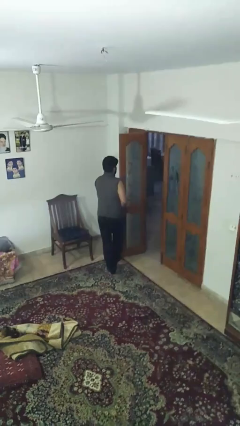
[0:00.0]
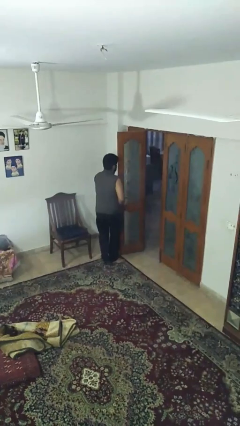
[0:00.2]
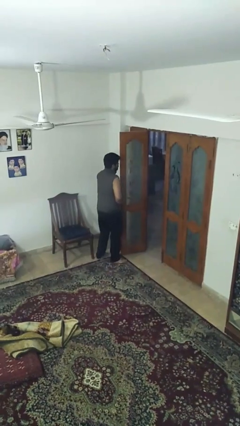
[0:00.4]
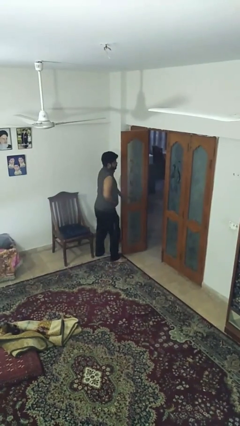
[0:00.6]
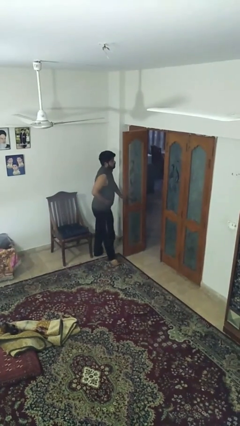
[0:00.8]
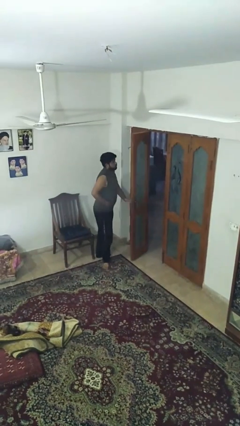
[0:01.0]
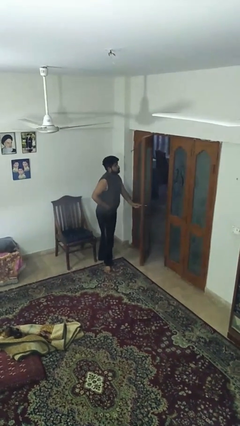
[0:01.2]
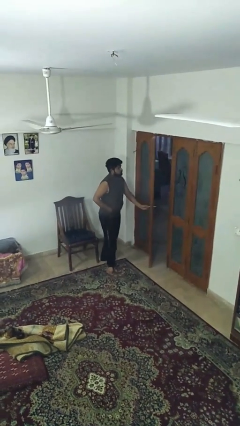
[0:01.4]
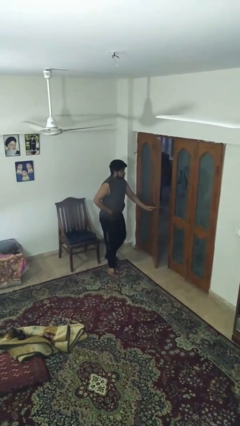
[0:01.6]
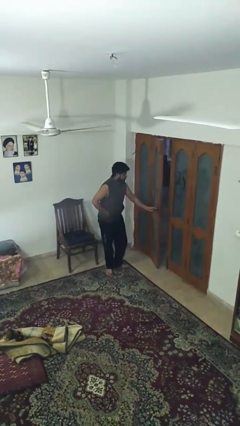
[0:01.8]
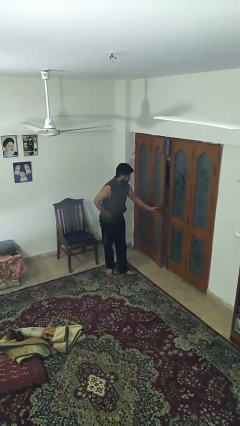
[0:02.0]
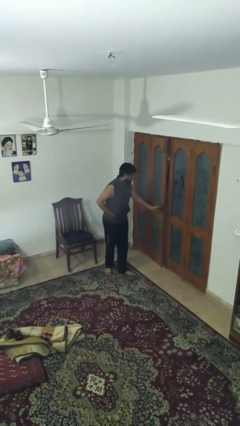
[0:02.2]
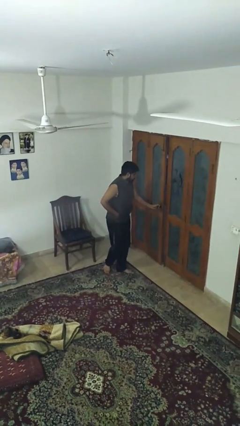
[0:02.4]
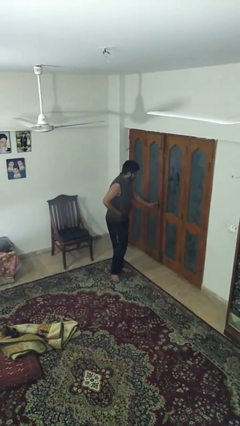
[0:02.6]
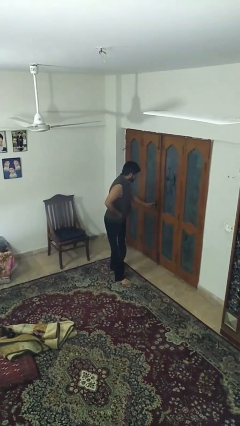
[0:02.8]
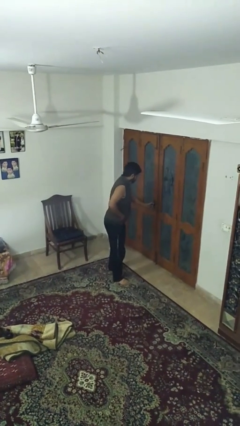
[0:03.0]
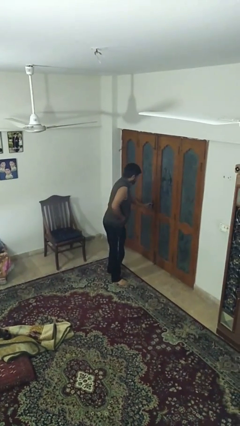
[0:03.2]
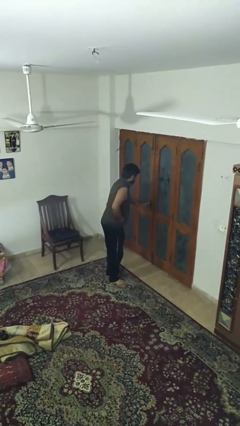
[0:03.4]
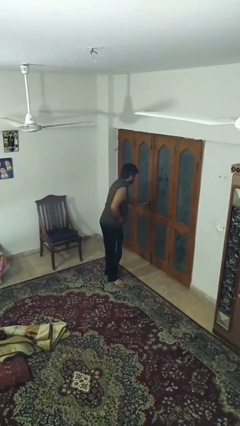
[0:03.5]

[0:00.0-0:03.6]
person closes facility door

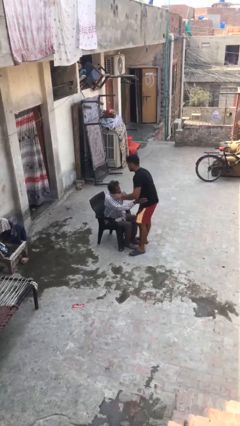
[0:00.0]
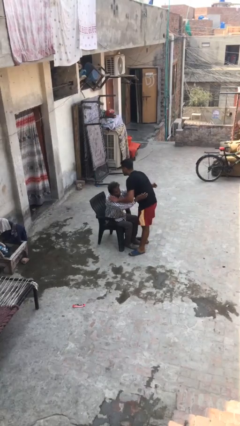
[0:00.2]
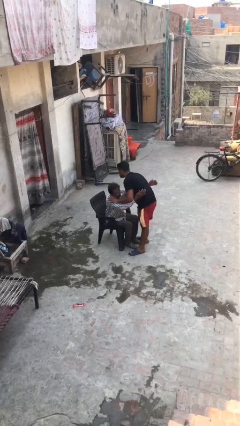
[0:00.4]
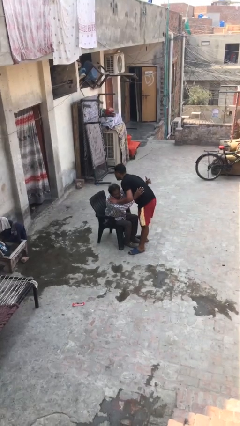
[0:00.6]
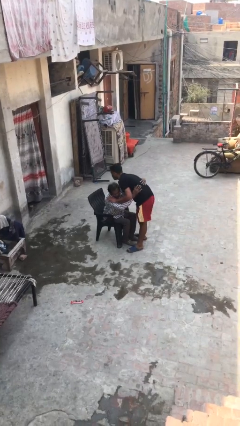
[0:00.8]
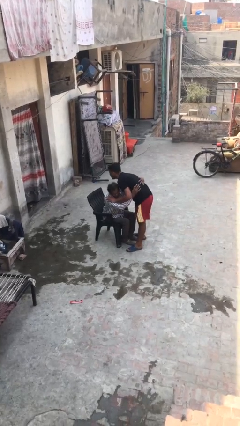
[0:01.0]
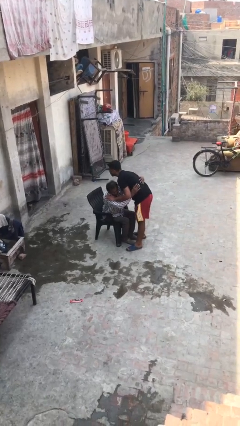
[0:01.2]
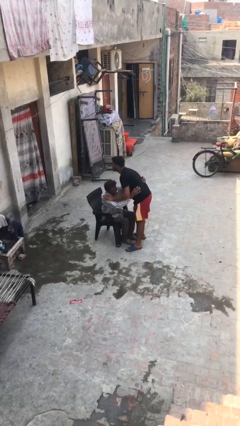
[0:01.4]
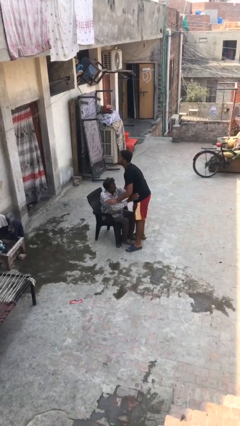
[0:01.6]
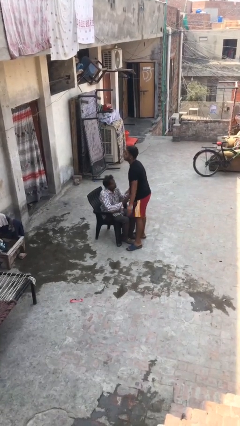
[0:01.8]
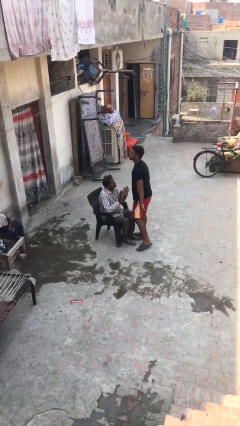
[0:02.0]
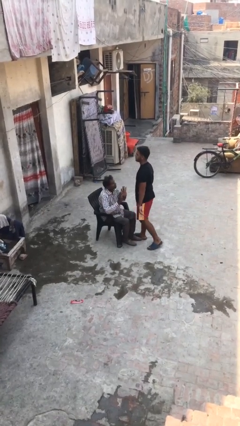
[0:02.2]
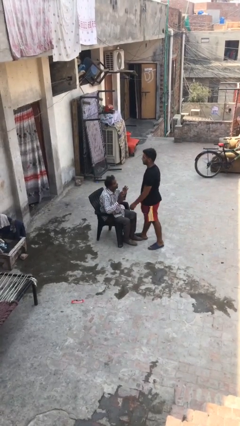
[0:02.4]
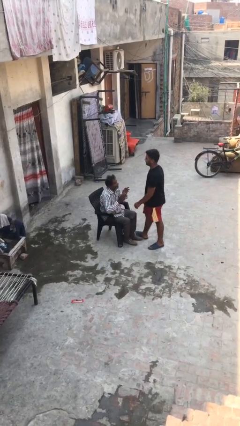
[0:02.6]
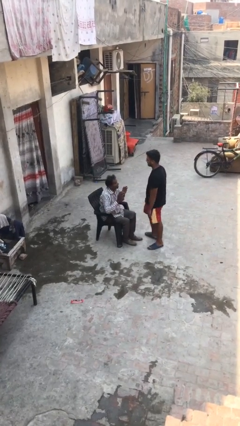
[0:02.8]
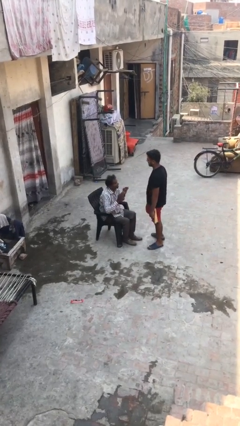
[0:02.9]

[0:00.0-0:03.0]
person embraces person

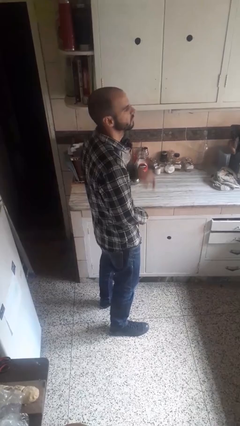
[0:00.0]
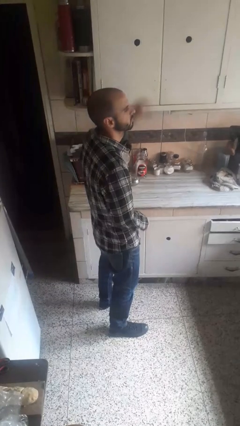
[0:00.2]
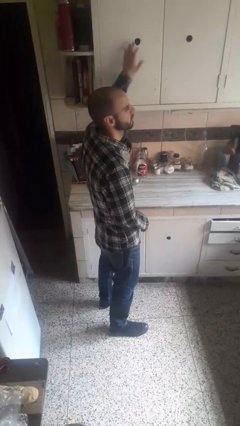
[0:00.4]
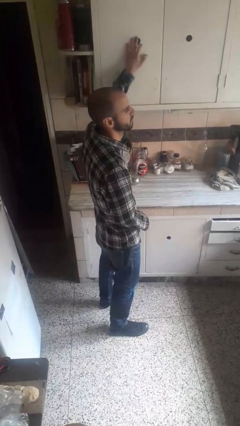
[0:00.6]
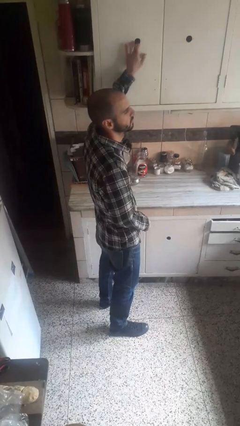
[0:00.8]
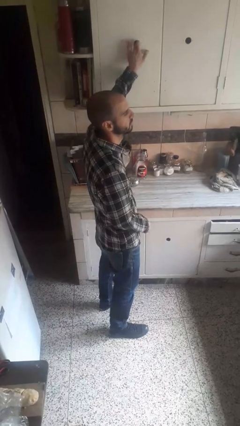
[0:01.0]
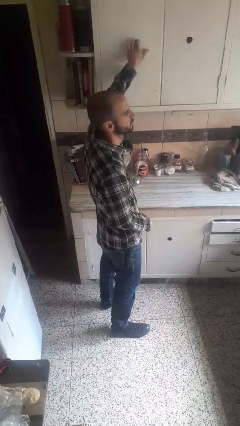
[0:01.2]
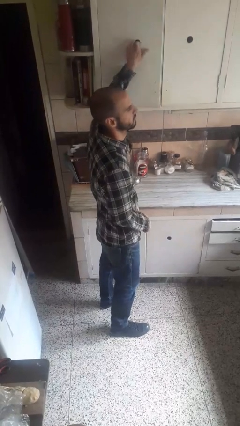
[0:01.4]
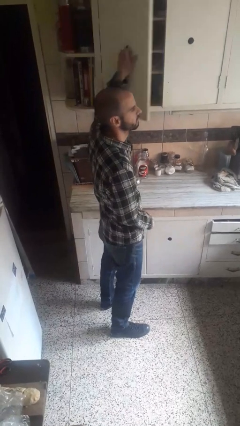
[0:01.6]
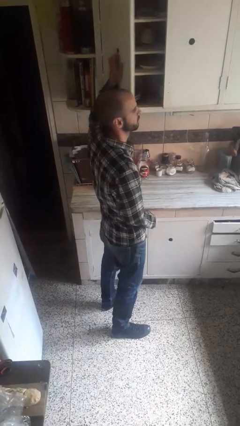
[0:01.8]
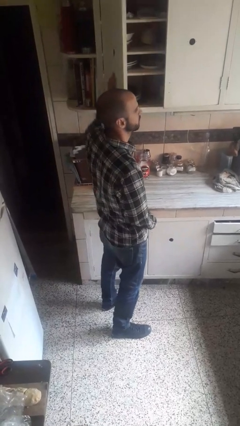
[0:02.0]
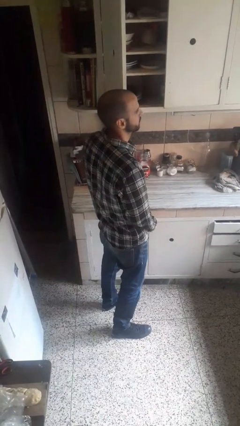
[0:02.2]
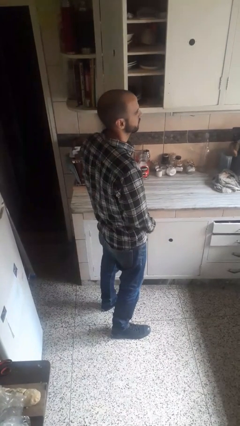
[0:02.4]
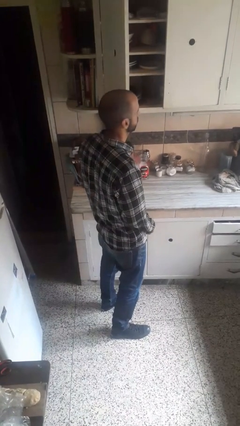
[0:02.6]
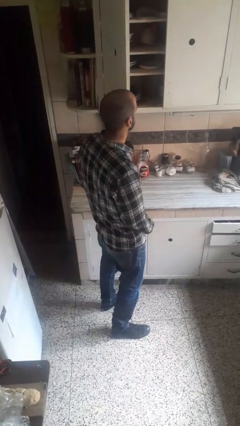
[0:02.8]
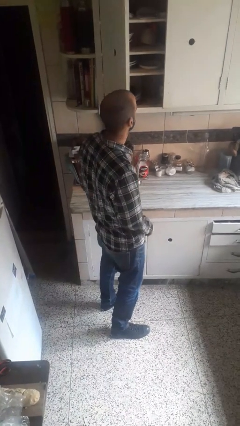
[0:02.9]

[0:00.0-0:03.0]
person opens closet door

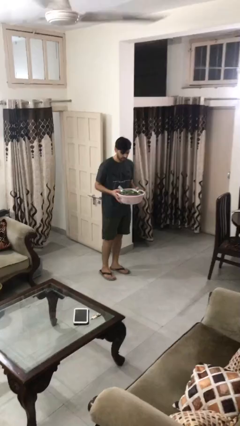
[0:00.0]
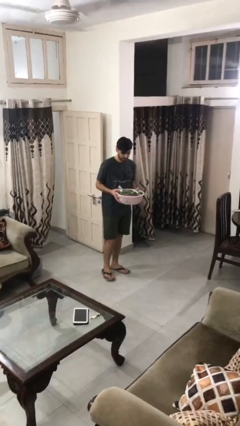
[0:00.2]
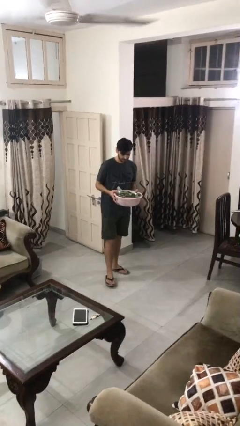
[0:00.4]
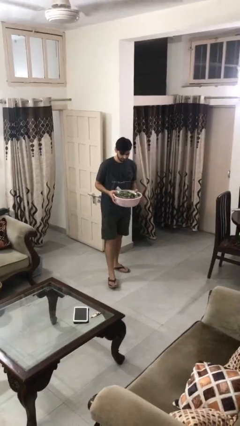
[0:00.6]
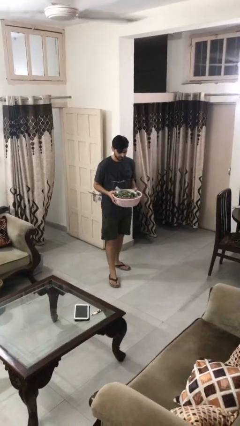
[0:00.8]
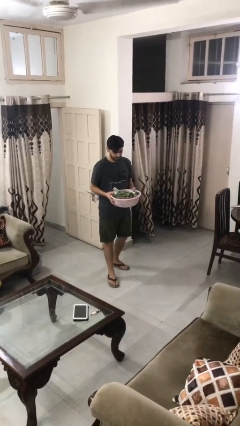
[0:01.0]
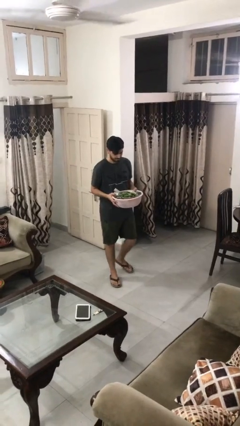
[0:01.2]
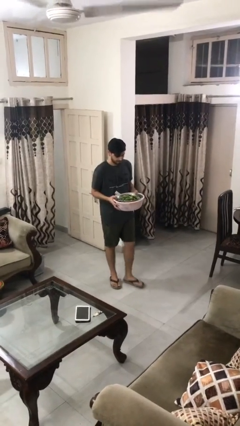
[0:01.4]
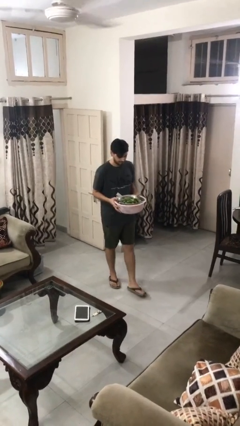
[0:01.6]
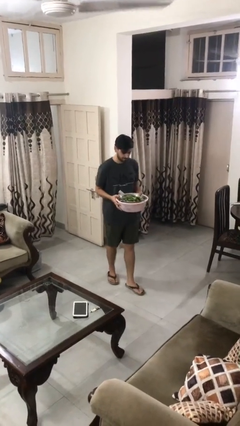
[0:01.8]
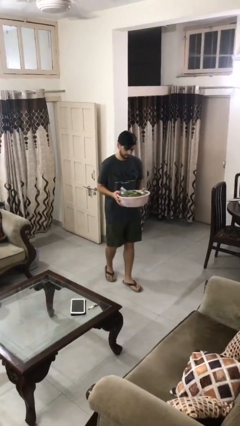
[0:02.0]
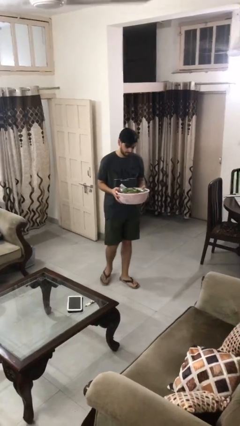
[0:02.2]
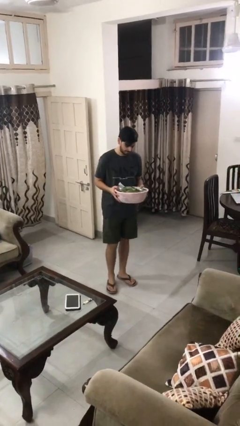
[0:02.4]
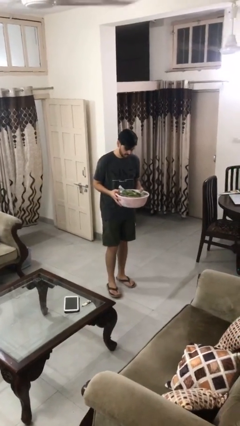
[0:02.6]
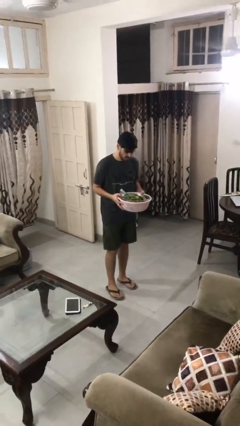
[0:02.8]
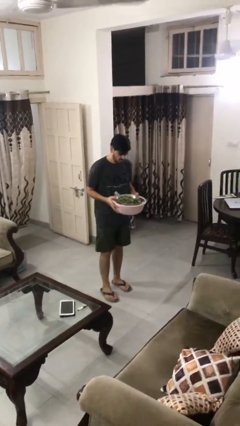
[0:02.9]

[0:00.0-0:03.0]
person carries groceries

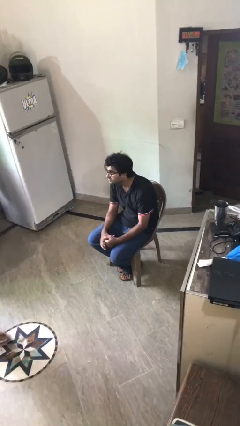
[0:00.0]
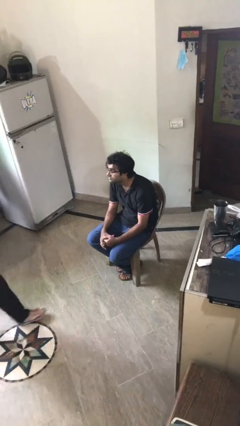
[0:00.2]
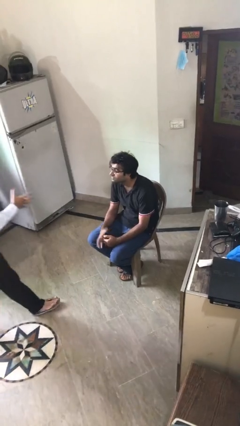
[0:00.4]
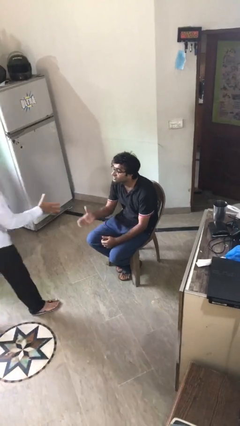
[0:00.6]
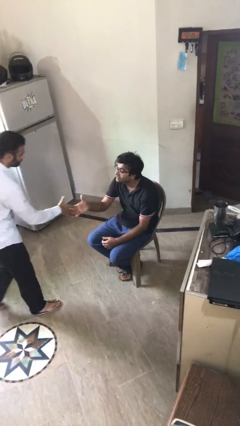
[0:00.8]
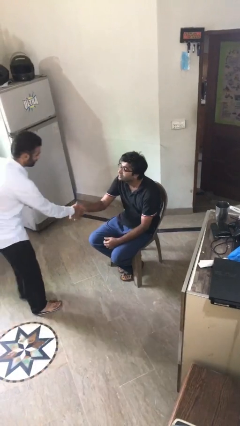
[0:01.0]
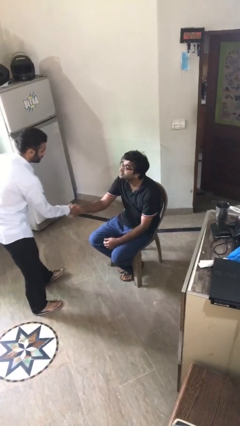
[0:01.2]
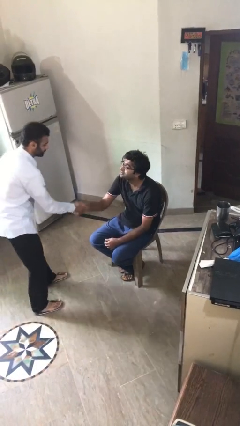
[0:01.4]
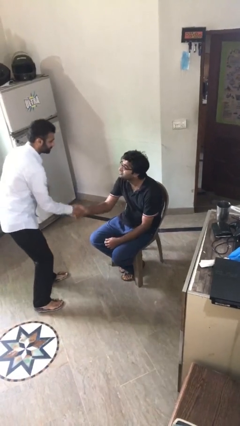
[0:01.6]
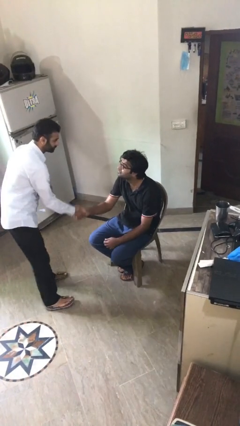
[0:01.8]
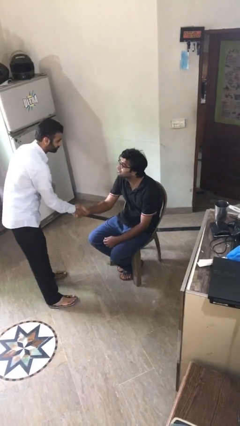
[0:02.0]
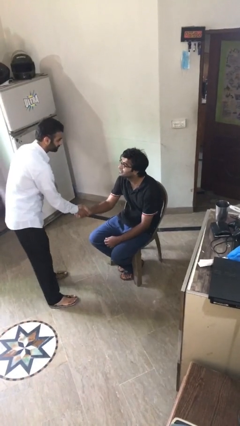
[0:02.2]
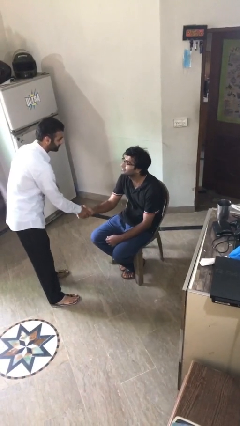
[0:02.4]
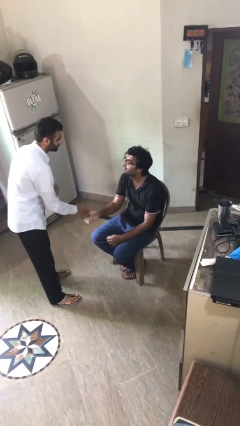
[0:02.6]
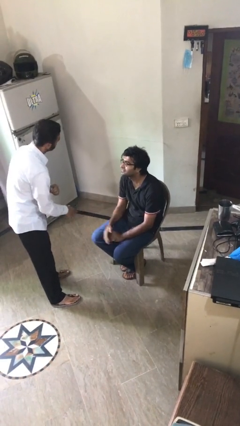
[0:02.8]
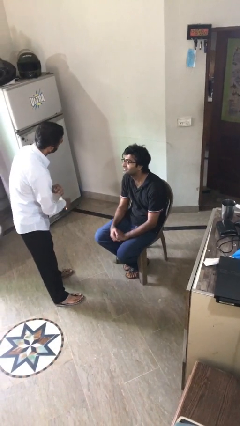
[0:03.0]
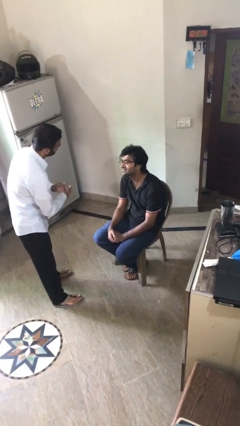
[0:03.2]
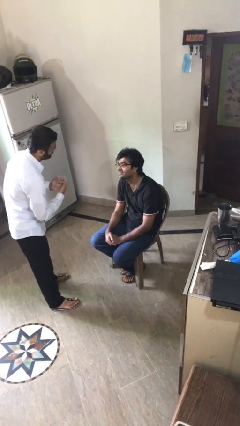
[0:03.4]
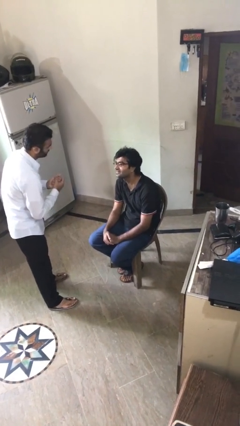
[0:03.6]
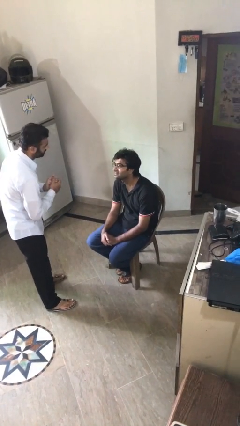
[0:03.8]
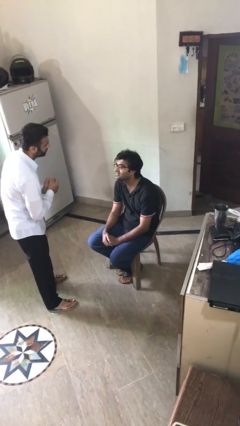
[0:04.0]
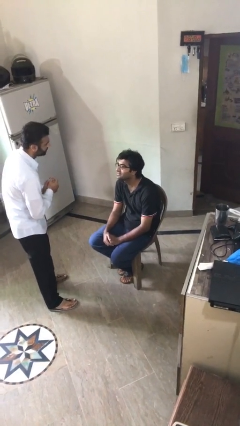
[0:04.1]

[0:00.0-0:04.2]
person shakes hand

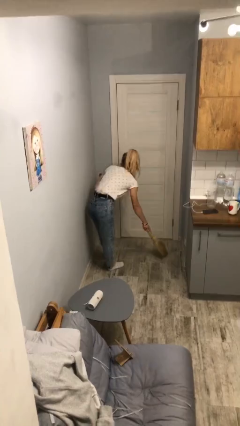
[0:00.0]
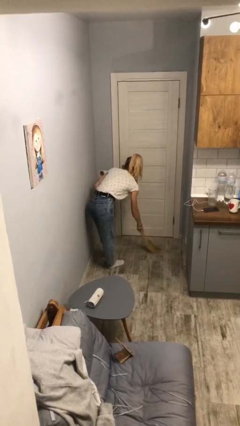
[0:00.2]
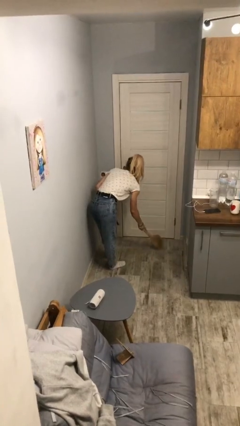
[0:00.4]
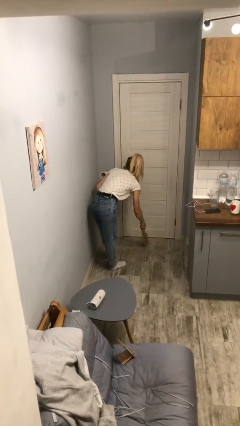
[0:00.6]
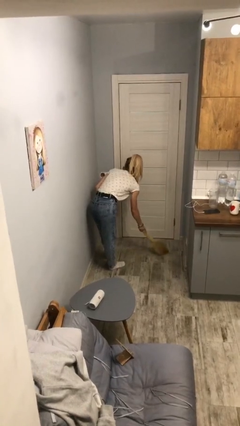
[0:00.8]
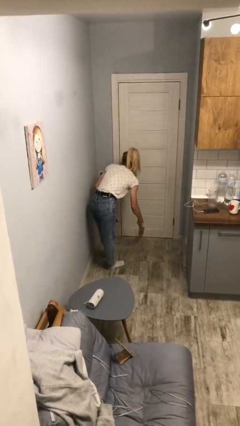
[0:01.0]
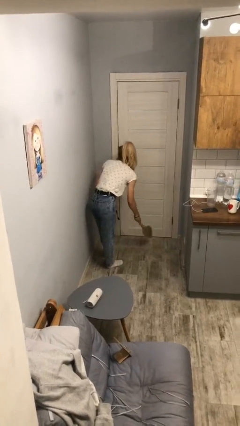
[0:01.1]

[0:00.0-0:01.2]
person sweeps floor
